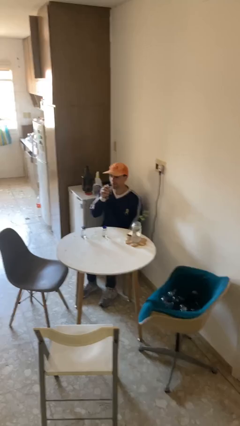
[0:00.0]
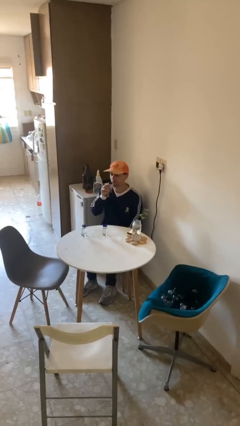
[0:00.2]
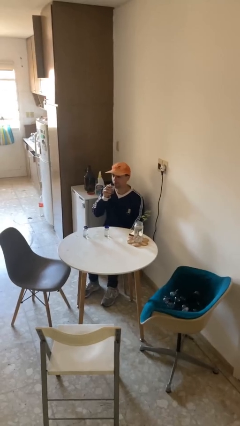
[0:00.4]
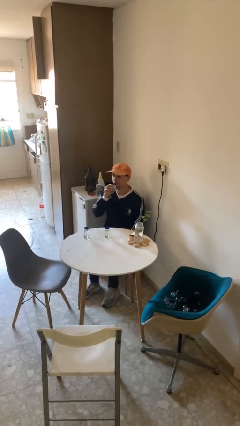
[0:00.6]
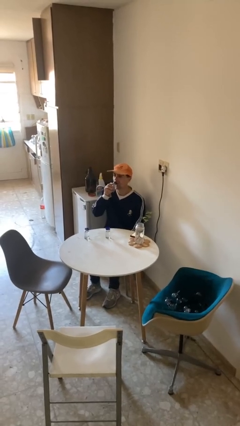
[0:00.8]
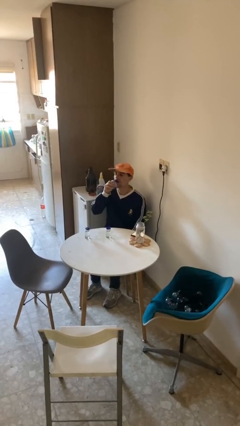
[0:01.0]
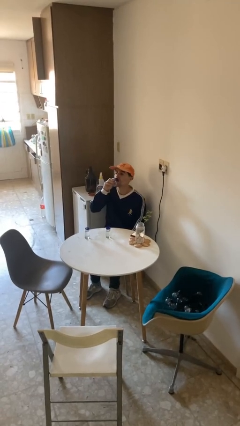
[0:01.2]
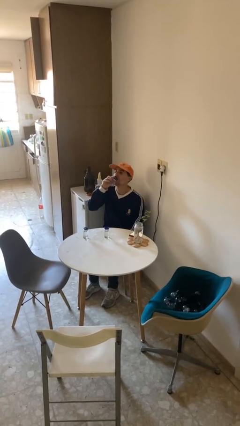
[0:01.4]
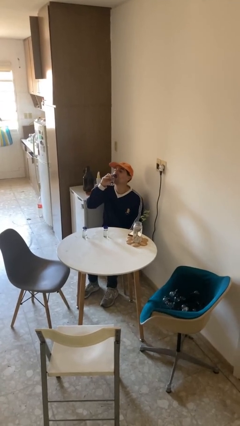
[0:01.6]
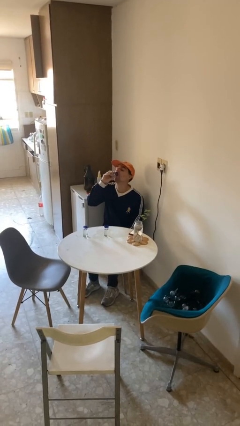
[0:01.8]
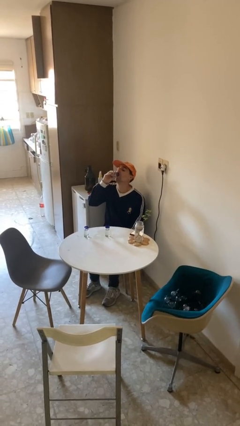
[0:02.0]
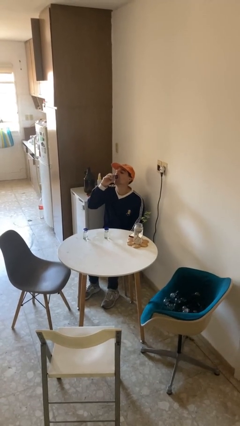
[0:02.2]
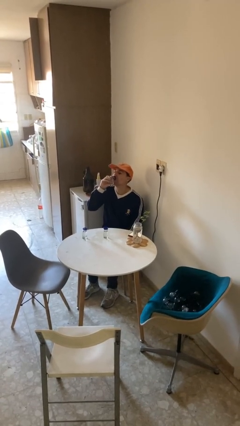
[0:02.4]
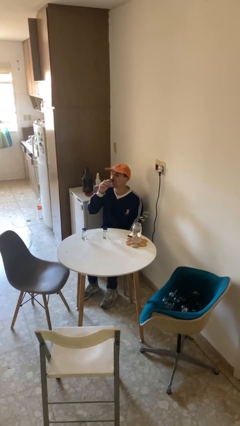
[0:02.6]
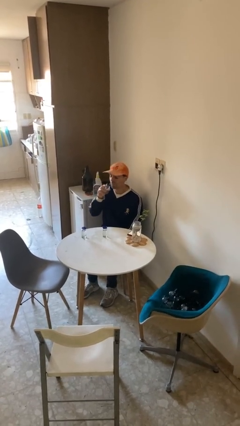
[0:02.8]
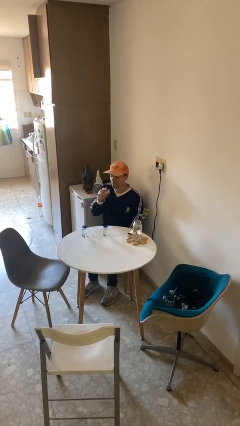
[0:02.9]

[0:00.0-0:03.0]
person drinks from shotglass

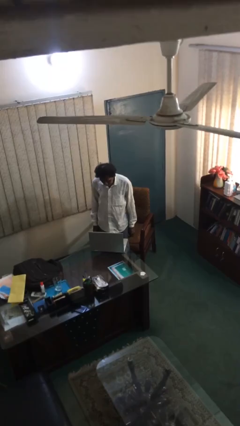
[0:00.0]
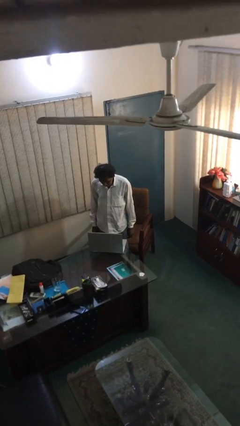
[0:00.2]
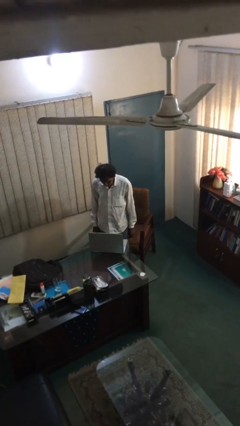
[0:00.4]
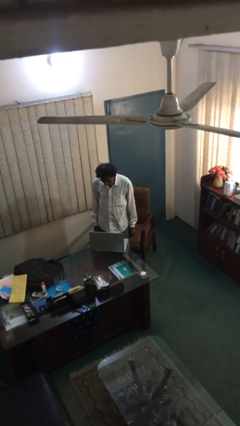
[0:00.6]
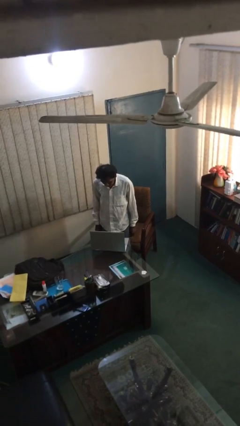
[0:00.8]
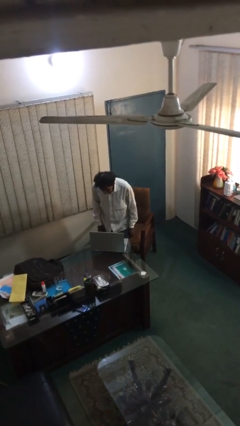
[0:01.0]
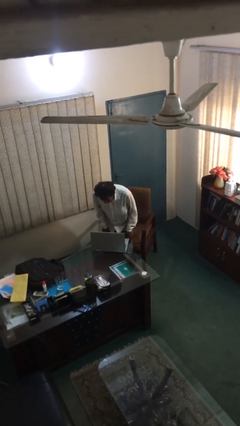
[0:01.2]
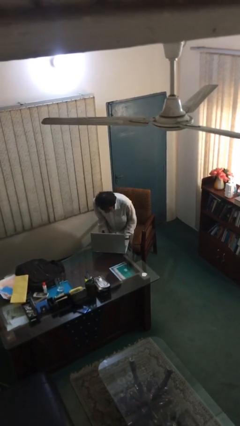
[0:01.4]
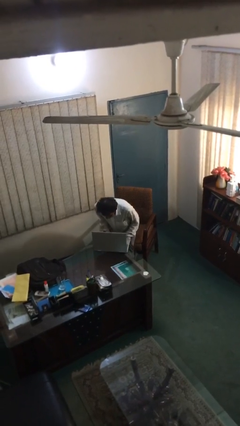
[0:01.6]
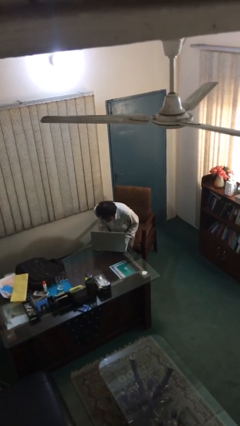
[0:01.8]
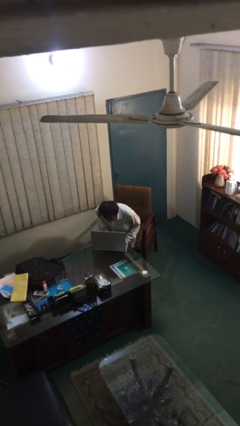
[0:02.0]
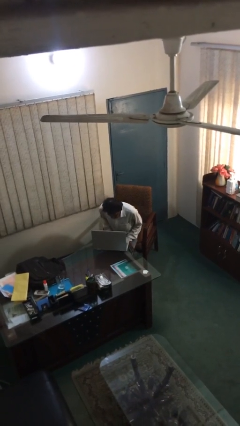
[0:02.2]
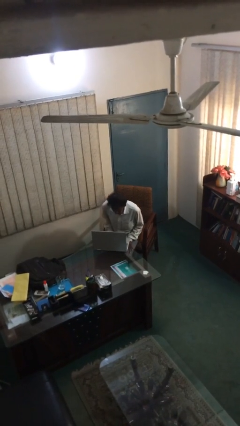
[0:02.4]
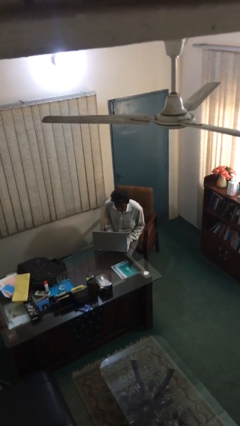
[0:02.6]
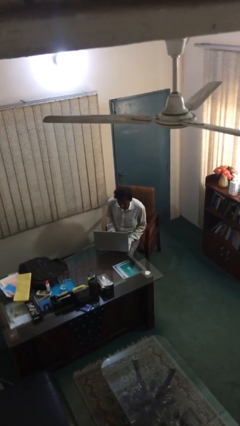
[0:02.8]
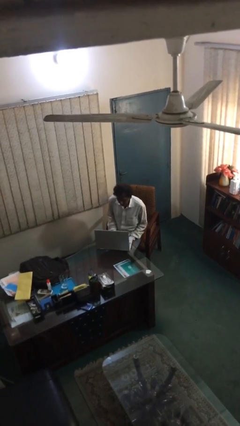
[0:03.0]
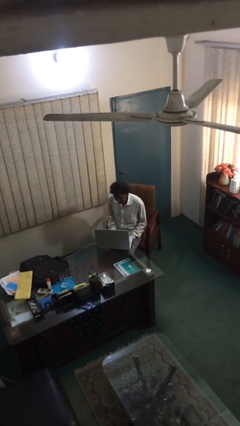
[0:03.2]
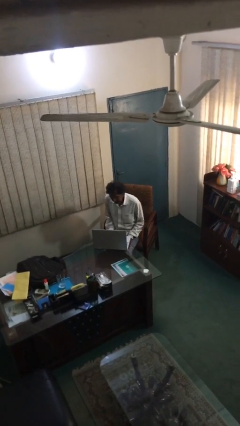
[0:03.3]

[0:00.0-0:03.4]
person sits down

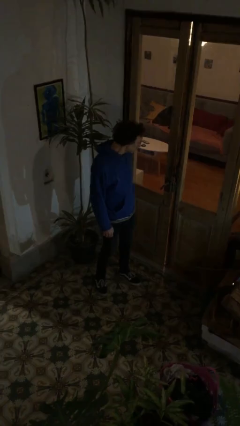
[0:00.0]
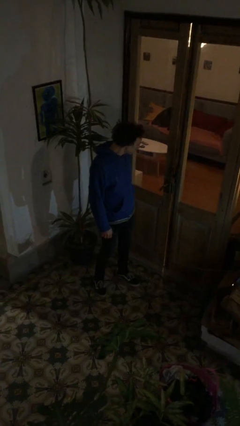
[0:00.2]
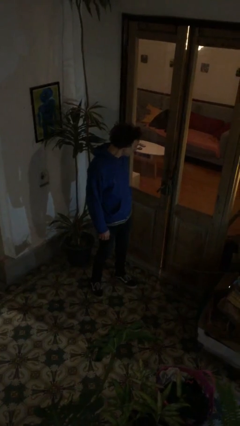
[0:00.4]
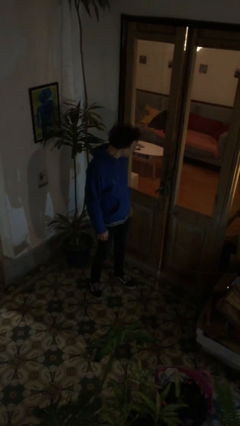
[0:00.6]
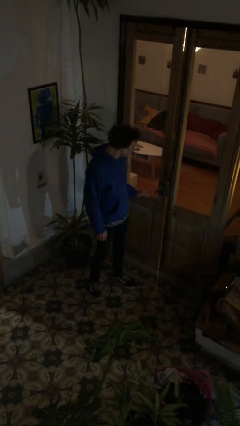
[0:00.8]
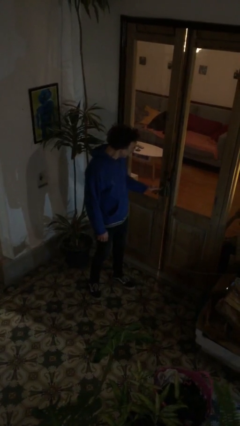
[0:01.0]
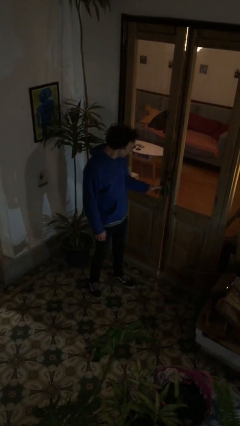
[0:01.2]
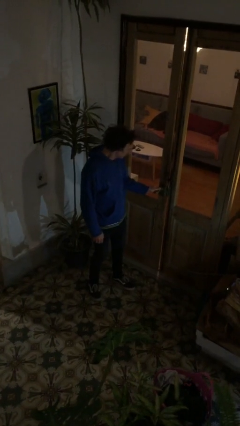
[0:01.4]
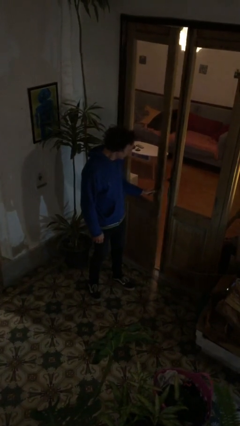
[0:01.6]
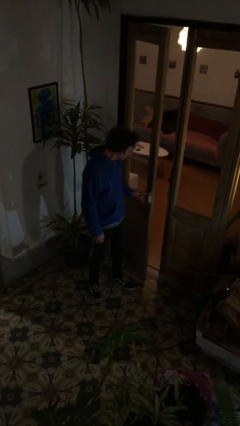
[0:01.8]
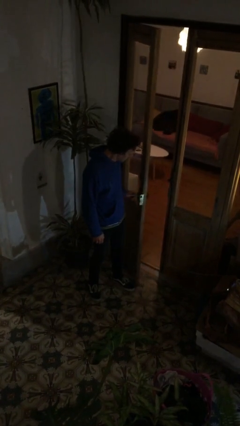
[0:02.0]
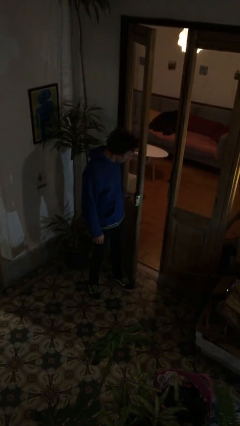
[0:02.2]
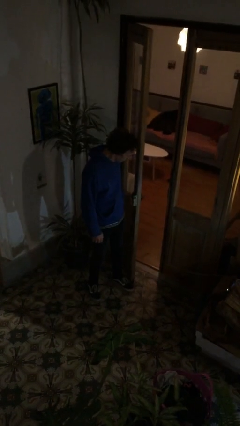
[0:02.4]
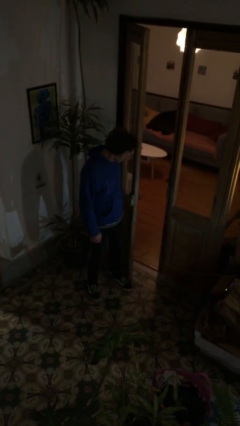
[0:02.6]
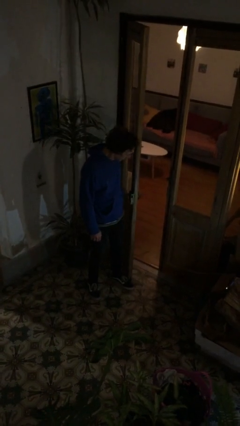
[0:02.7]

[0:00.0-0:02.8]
person opens facility door

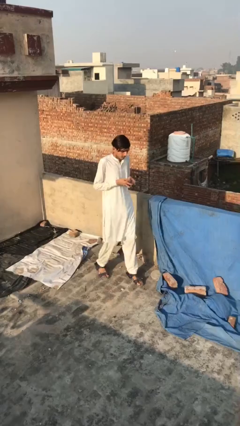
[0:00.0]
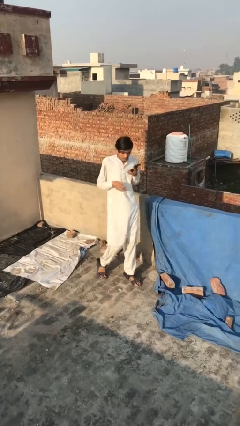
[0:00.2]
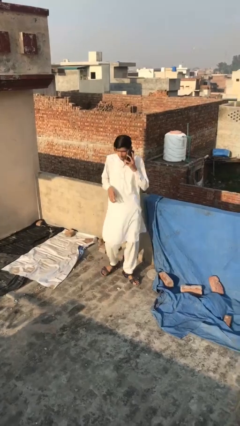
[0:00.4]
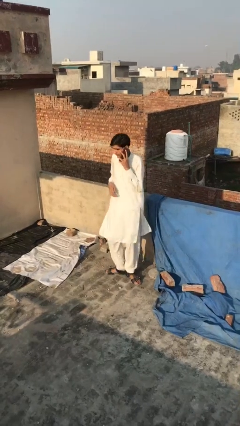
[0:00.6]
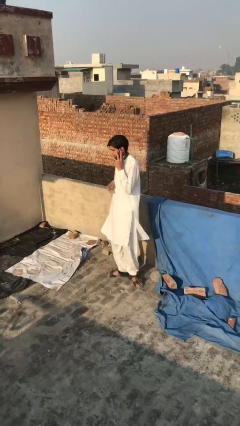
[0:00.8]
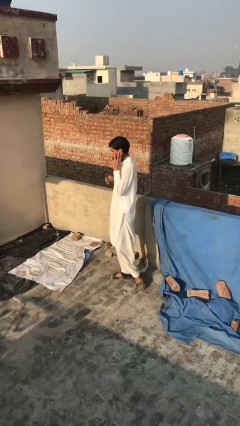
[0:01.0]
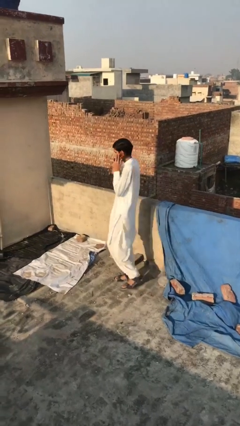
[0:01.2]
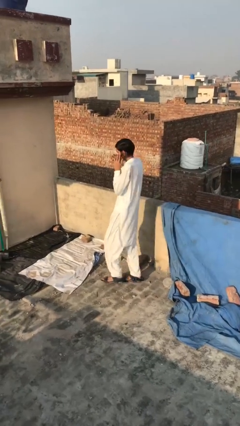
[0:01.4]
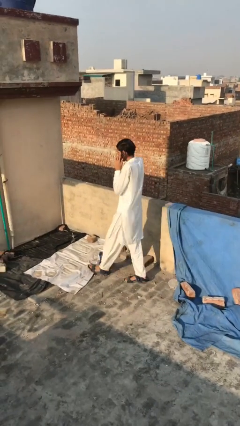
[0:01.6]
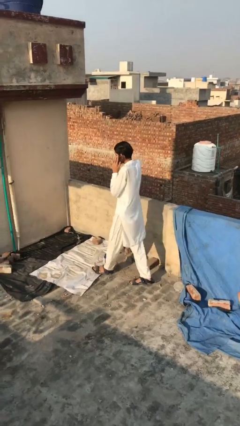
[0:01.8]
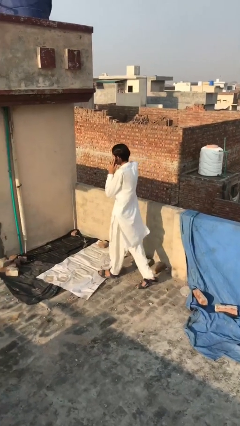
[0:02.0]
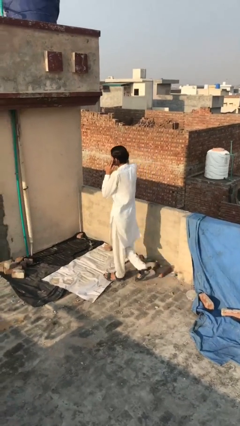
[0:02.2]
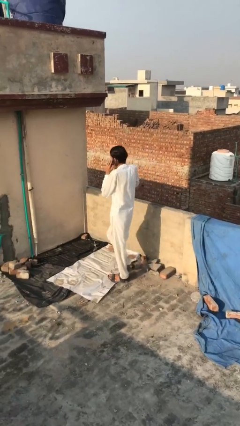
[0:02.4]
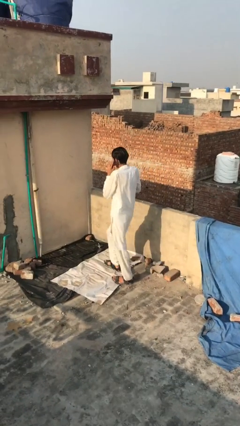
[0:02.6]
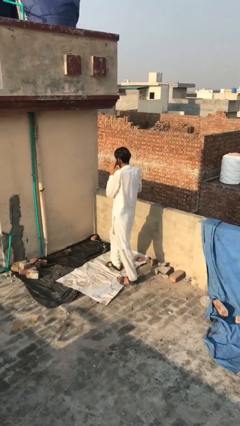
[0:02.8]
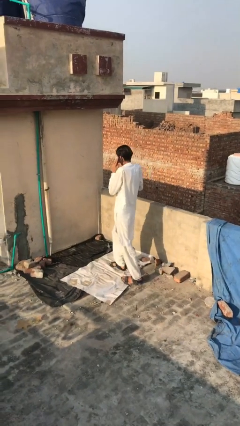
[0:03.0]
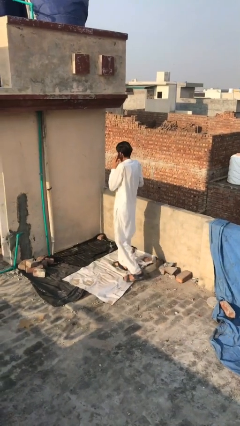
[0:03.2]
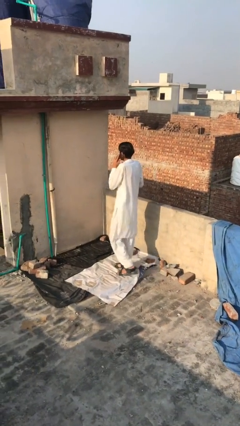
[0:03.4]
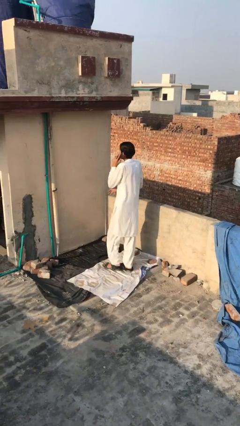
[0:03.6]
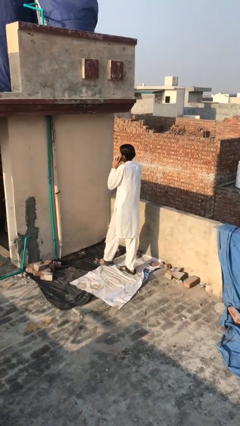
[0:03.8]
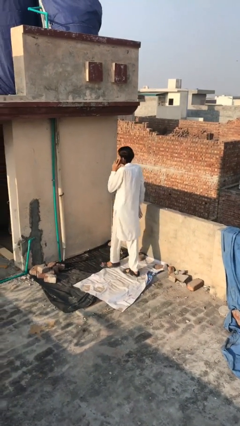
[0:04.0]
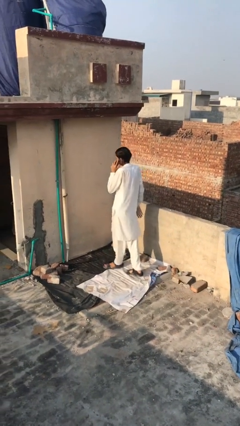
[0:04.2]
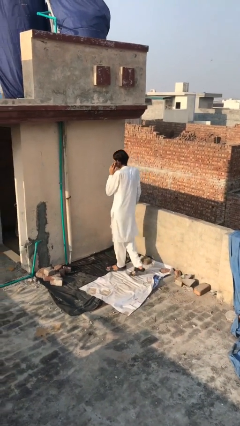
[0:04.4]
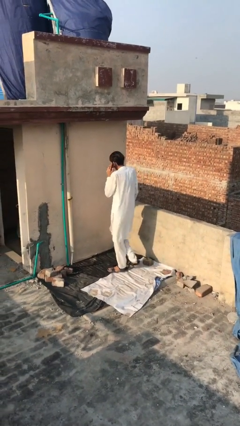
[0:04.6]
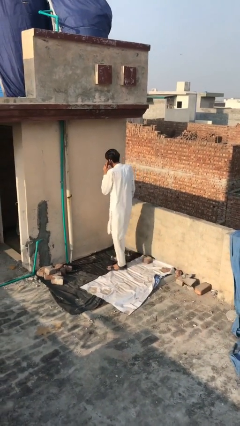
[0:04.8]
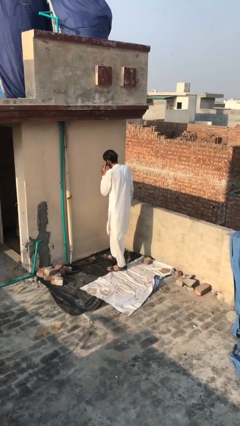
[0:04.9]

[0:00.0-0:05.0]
person talks on phone

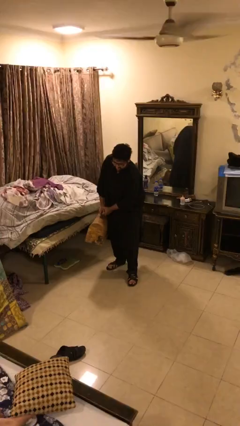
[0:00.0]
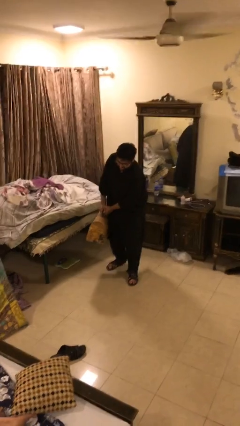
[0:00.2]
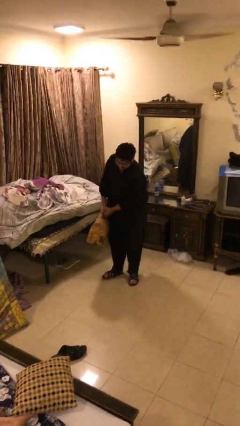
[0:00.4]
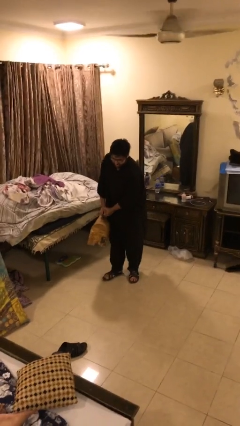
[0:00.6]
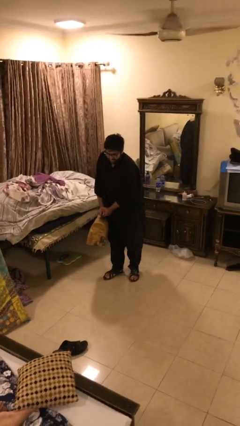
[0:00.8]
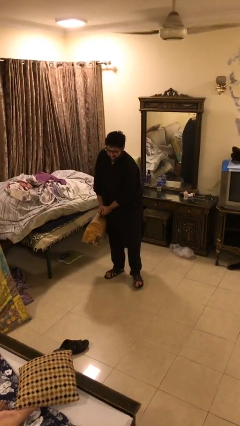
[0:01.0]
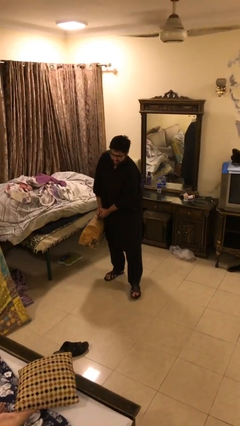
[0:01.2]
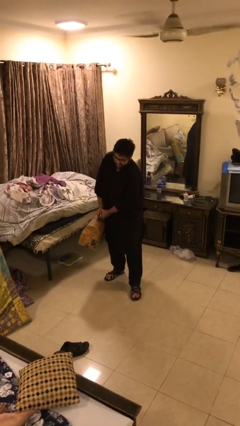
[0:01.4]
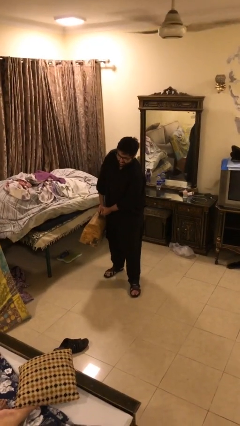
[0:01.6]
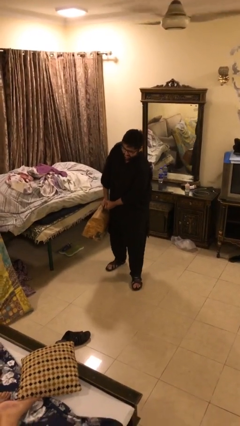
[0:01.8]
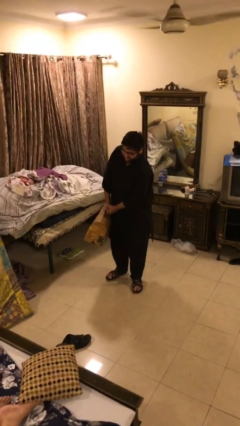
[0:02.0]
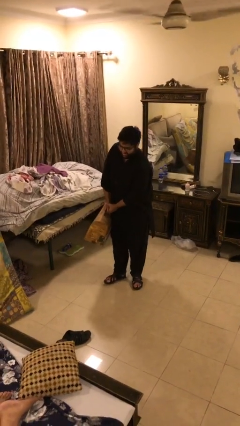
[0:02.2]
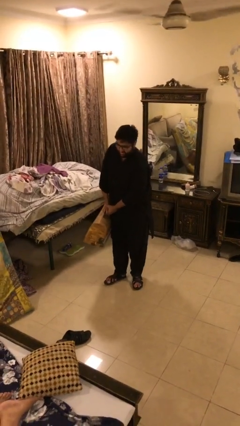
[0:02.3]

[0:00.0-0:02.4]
person carries heavy object

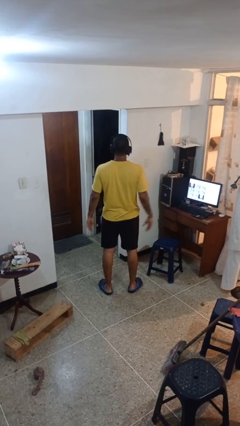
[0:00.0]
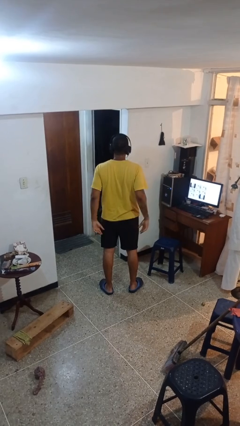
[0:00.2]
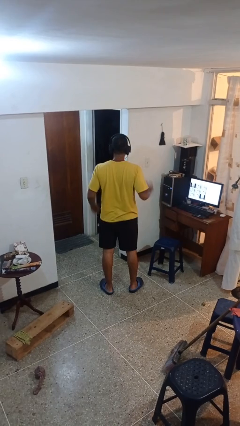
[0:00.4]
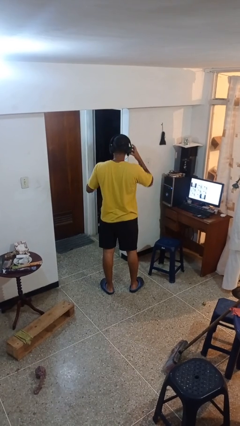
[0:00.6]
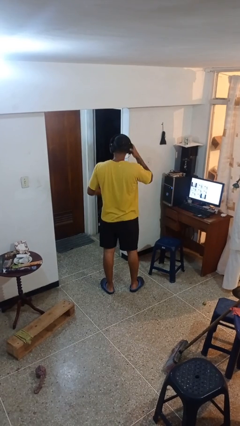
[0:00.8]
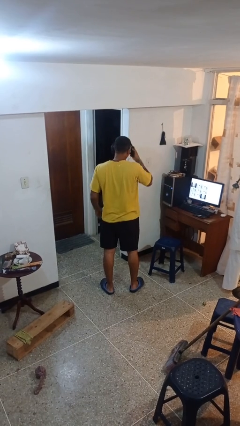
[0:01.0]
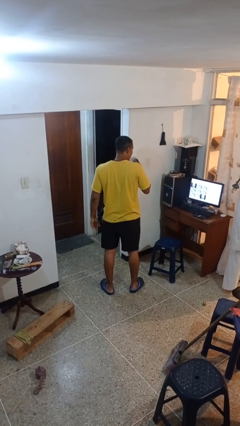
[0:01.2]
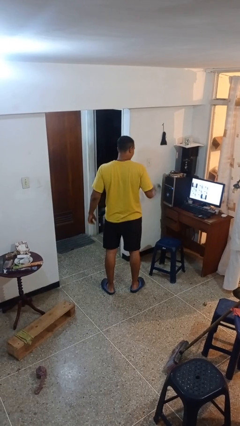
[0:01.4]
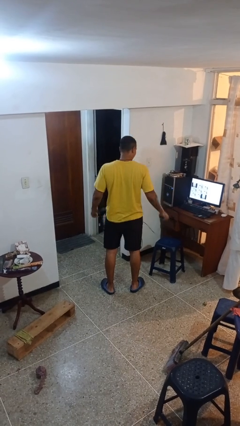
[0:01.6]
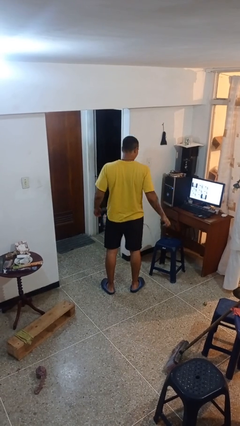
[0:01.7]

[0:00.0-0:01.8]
person takes off headphones
